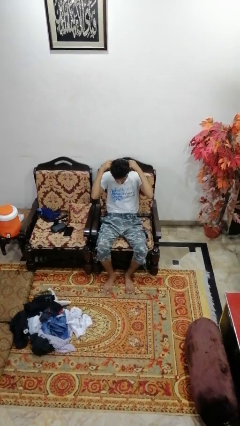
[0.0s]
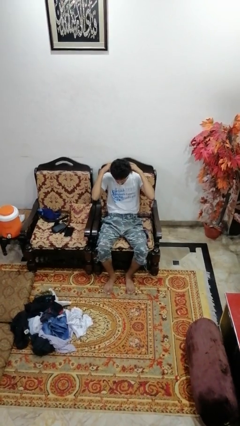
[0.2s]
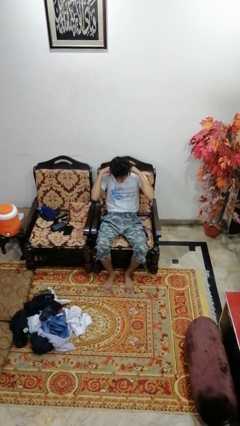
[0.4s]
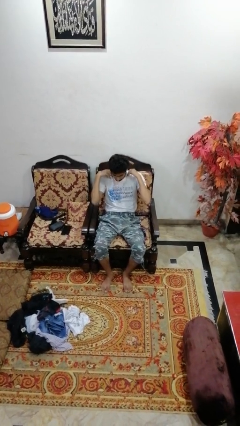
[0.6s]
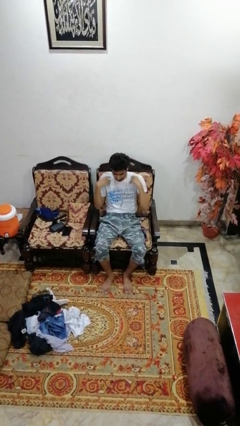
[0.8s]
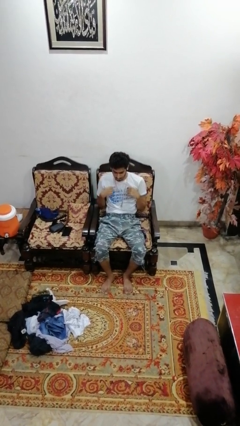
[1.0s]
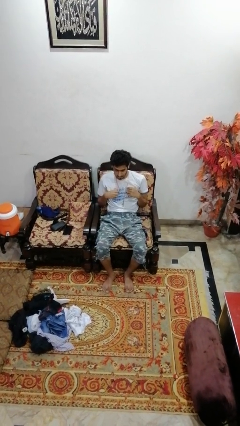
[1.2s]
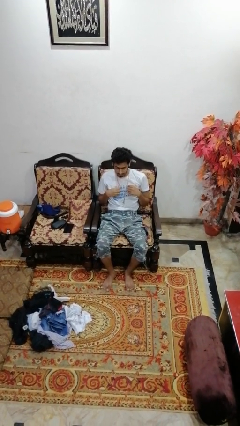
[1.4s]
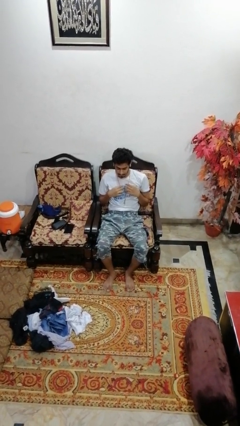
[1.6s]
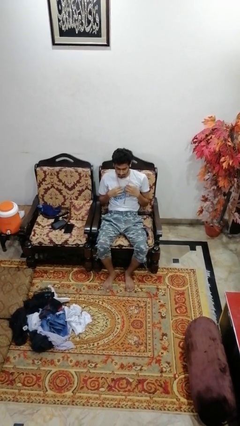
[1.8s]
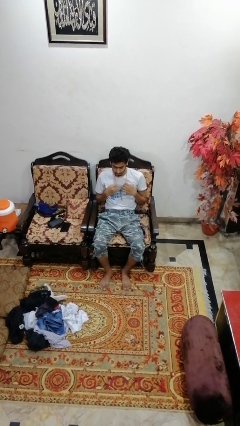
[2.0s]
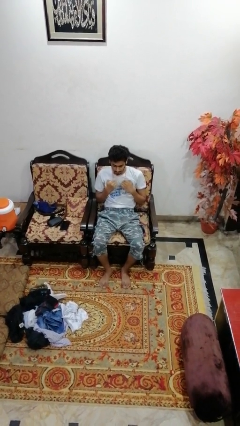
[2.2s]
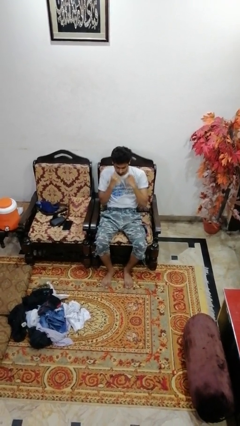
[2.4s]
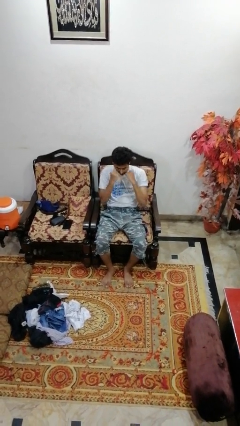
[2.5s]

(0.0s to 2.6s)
person puts on necklace

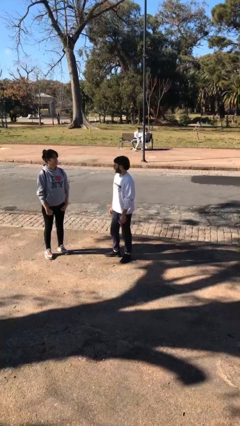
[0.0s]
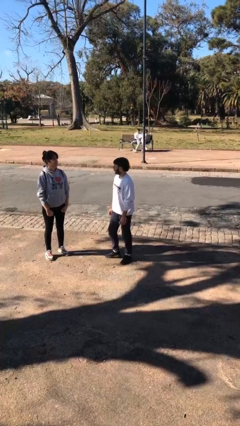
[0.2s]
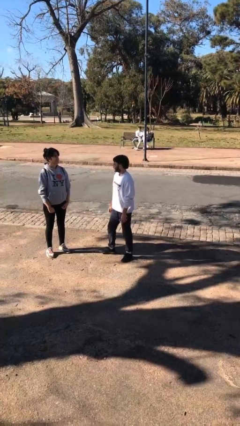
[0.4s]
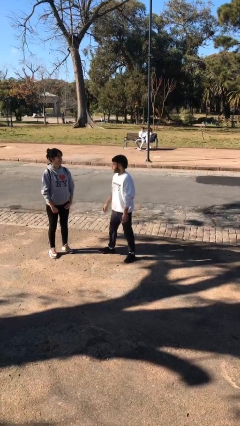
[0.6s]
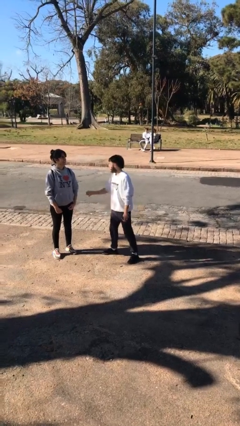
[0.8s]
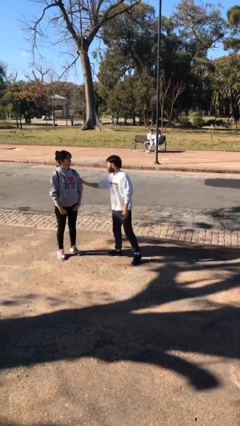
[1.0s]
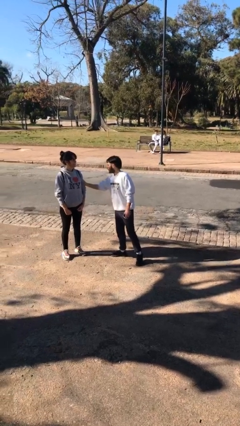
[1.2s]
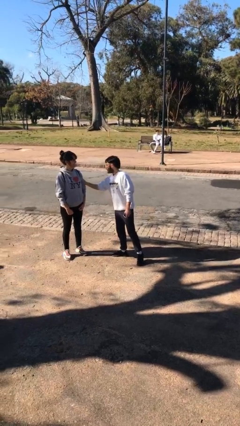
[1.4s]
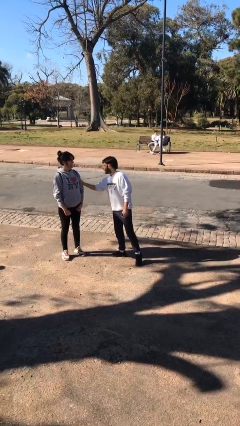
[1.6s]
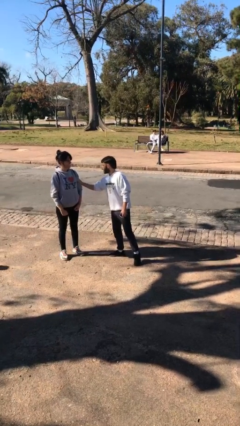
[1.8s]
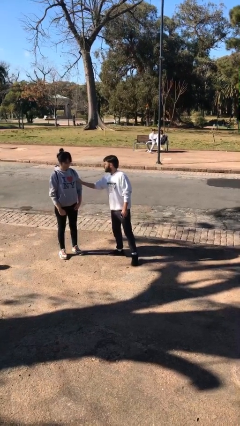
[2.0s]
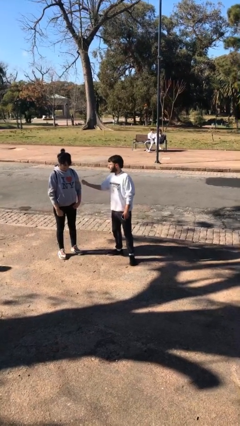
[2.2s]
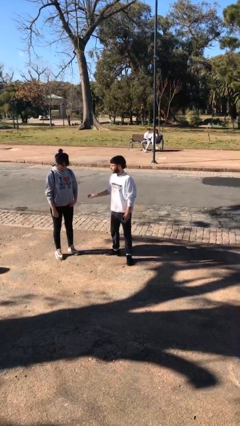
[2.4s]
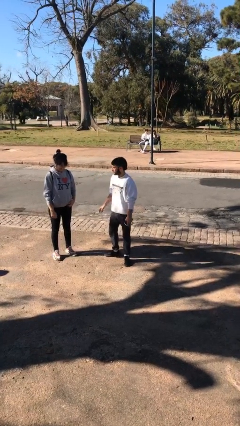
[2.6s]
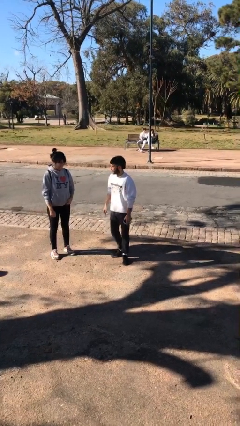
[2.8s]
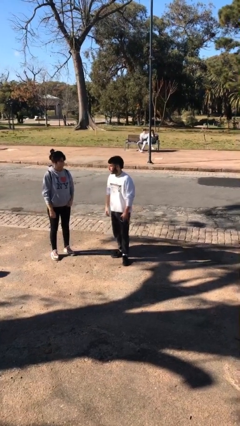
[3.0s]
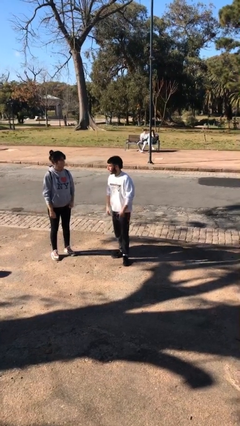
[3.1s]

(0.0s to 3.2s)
person grabs person by bicep

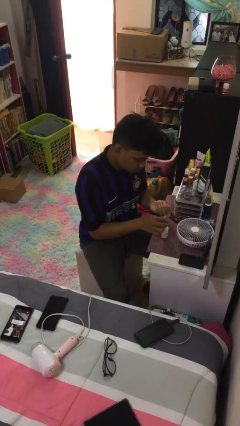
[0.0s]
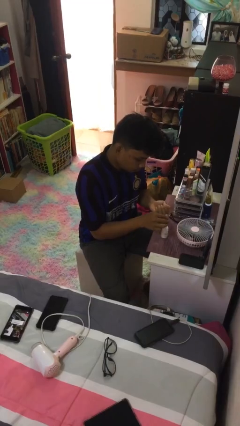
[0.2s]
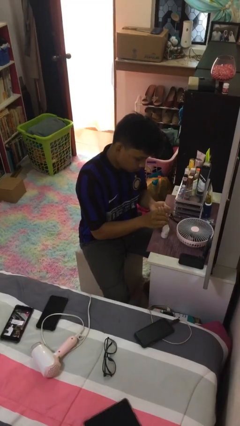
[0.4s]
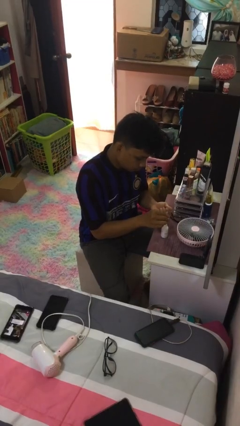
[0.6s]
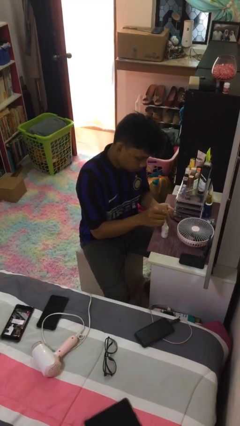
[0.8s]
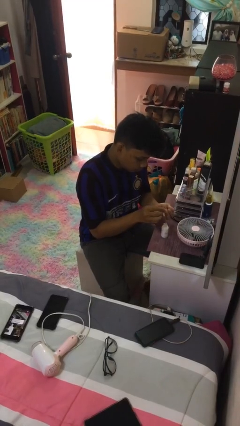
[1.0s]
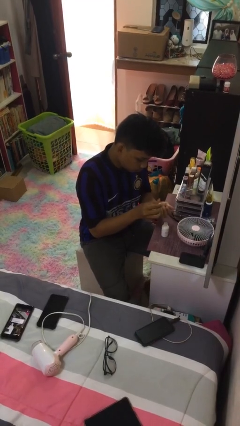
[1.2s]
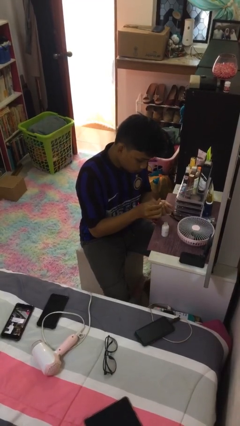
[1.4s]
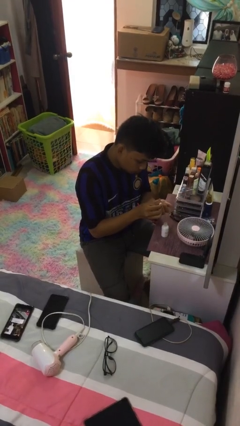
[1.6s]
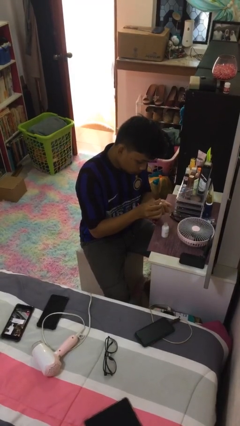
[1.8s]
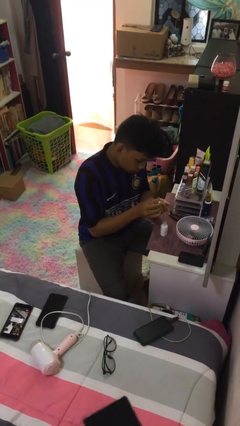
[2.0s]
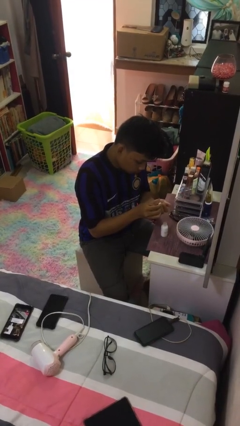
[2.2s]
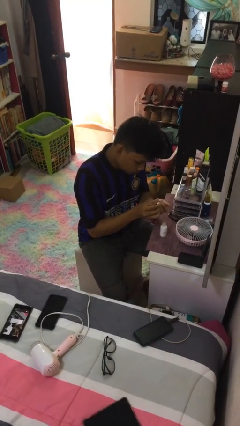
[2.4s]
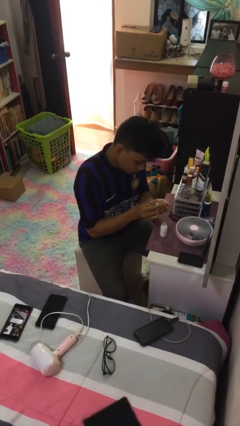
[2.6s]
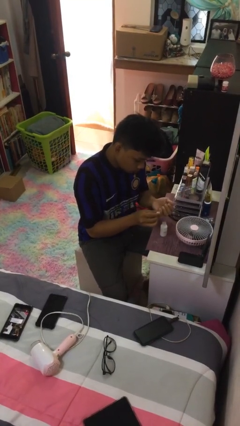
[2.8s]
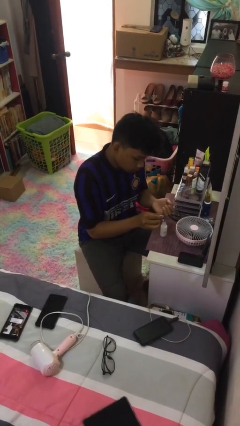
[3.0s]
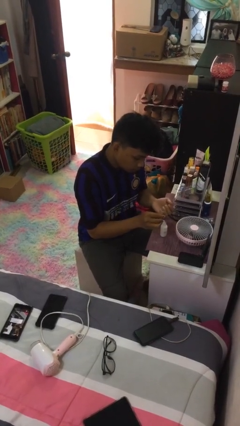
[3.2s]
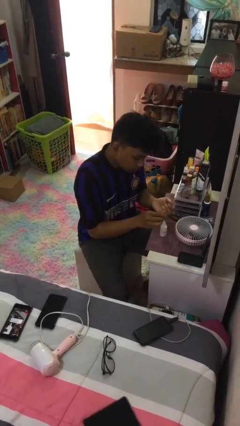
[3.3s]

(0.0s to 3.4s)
person paints fingernails

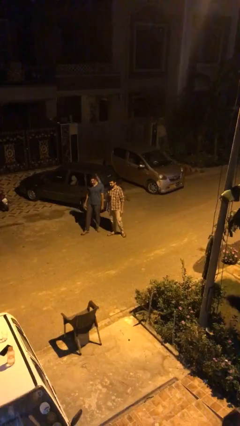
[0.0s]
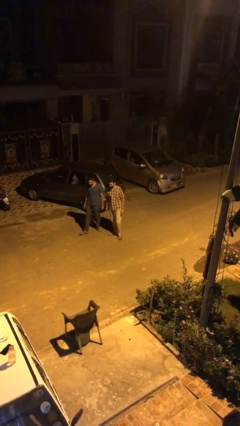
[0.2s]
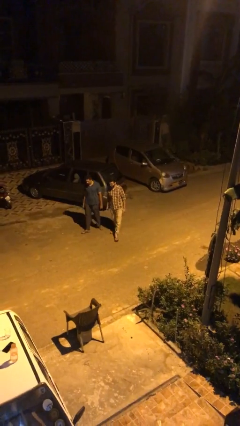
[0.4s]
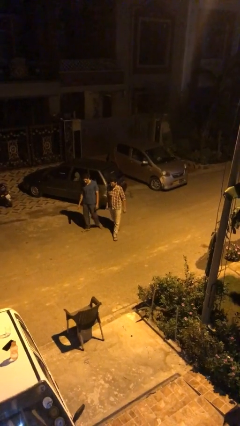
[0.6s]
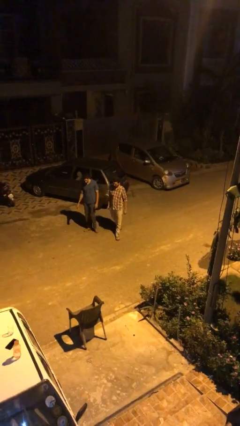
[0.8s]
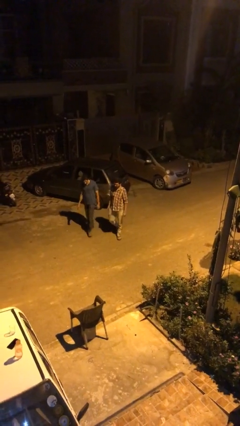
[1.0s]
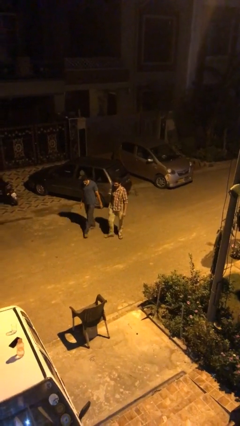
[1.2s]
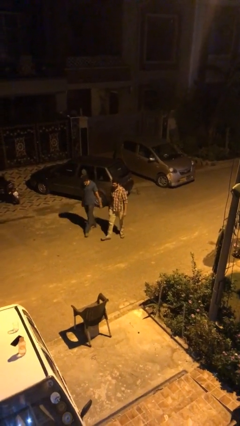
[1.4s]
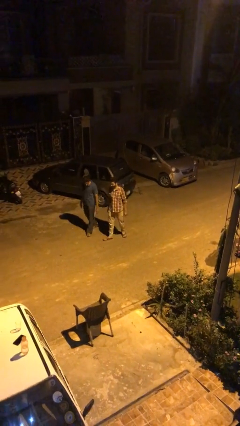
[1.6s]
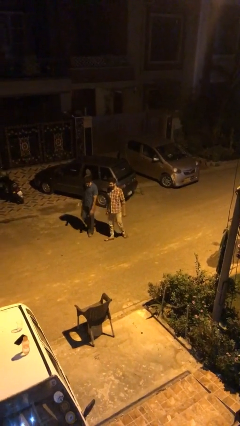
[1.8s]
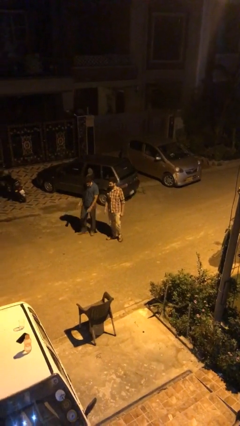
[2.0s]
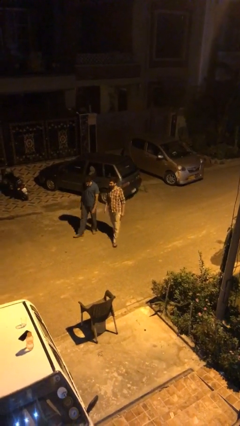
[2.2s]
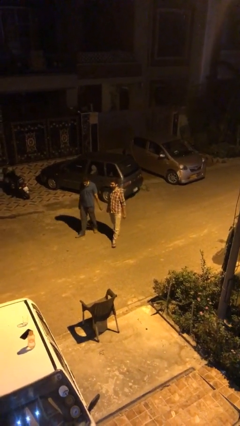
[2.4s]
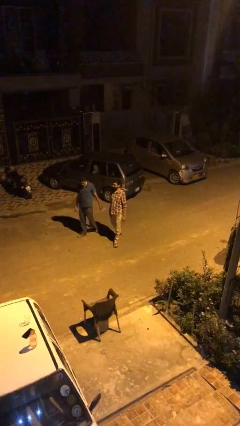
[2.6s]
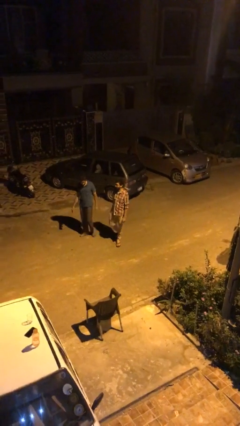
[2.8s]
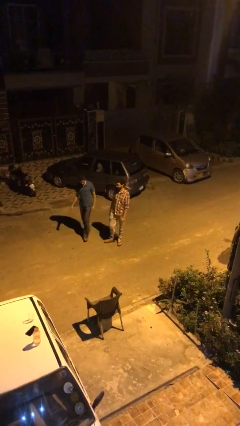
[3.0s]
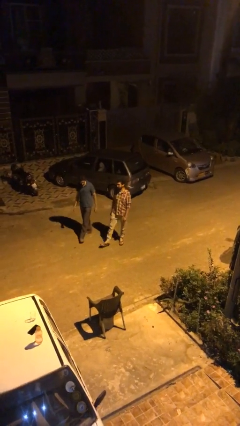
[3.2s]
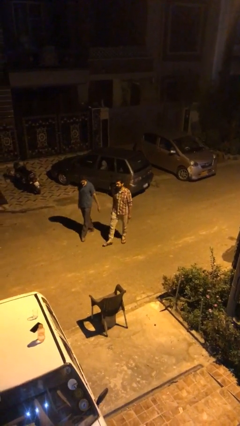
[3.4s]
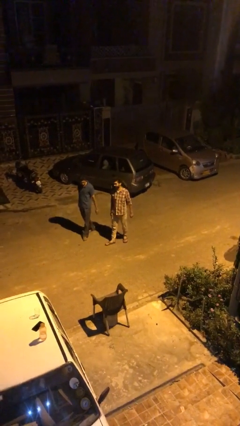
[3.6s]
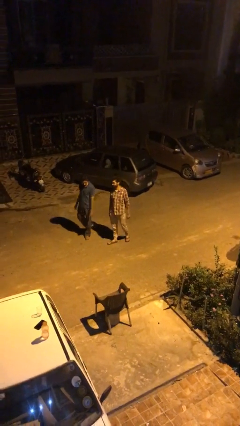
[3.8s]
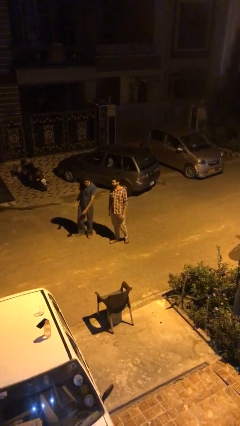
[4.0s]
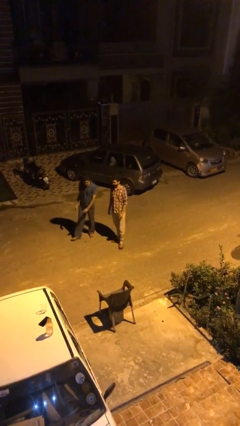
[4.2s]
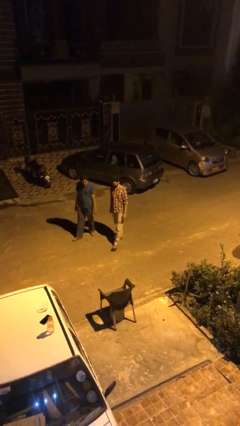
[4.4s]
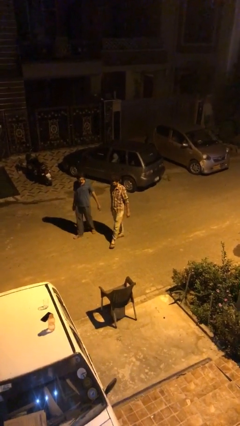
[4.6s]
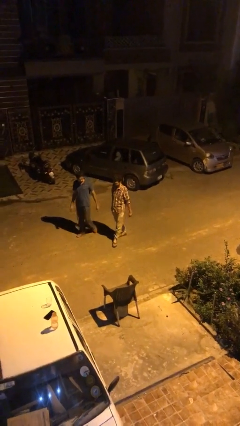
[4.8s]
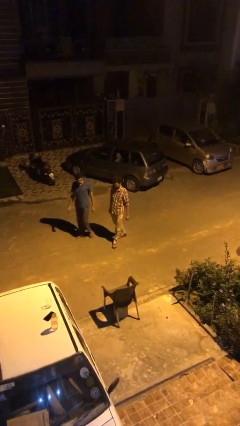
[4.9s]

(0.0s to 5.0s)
person talks to person

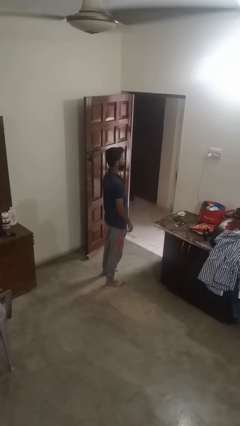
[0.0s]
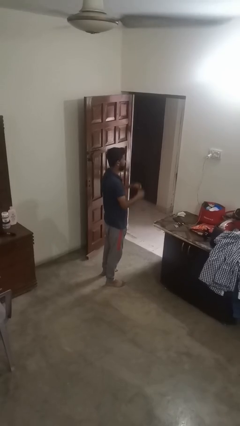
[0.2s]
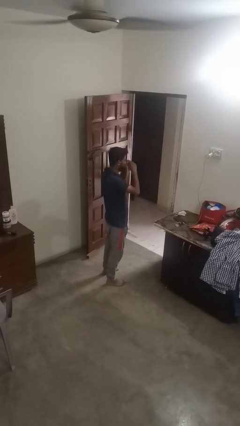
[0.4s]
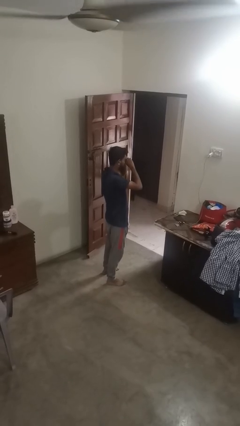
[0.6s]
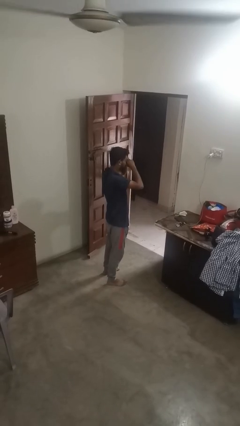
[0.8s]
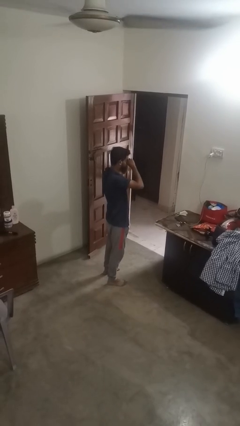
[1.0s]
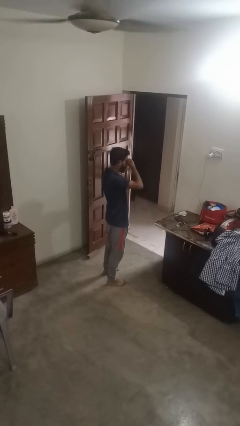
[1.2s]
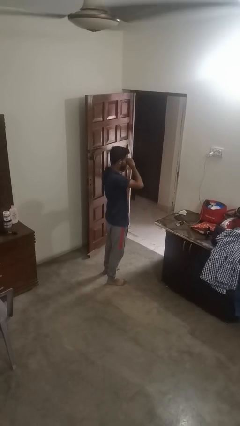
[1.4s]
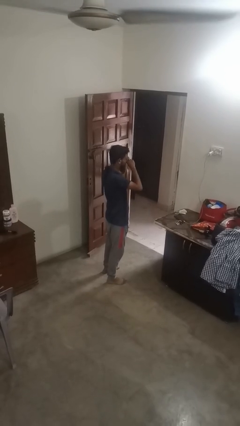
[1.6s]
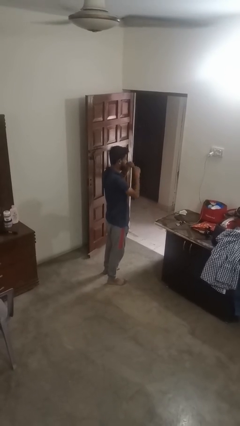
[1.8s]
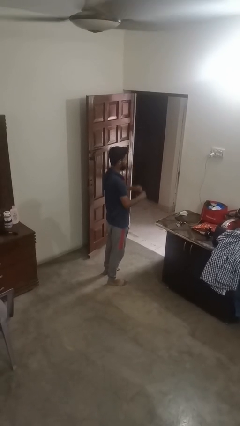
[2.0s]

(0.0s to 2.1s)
person rubs eyes

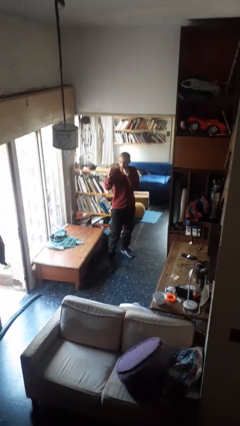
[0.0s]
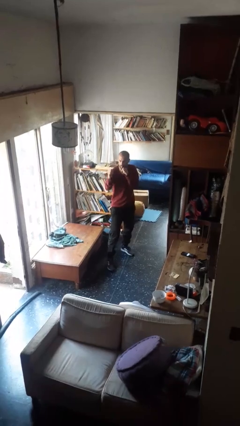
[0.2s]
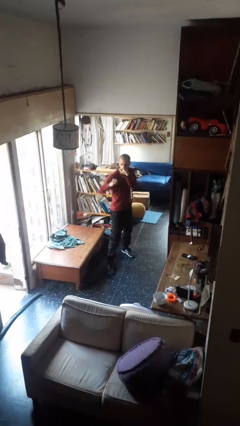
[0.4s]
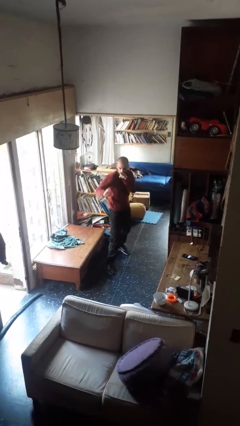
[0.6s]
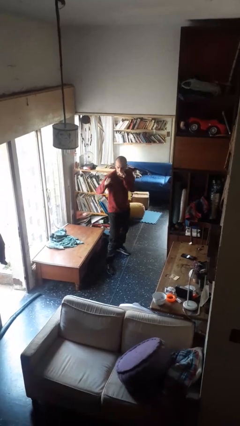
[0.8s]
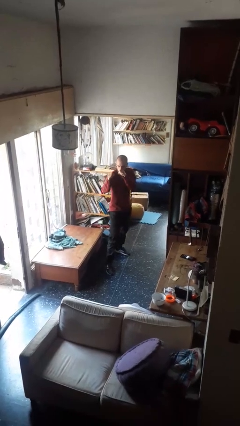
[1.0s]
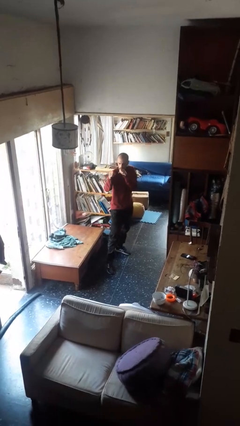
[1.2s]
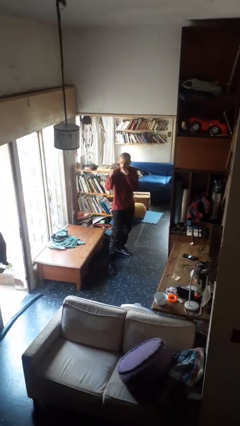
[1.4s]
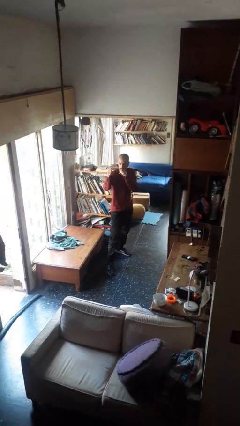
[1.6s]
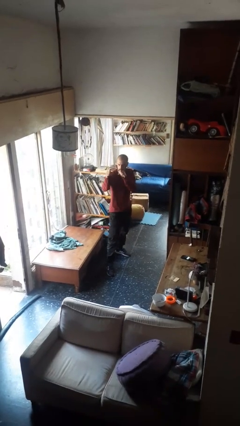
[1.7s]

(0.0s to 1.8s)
person punches
